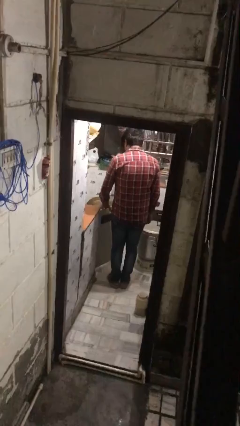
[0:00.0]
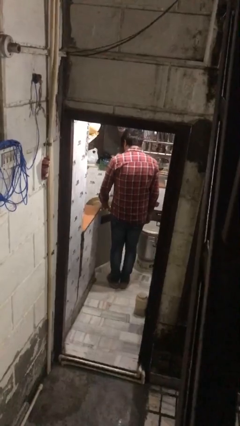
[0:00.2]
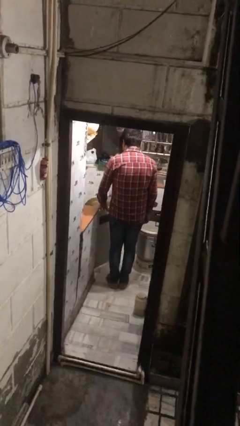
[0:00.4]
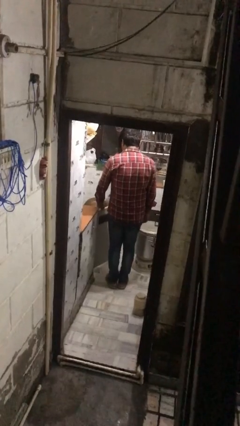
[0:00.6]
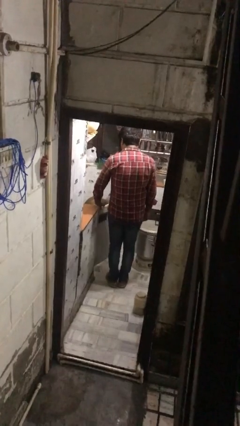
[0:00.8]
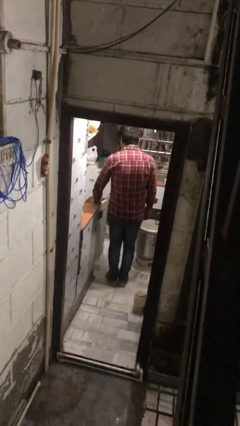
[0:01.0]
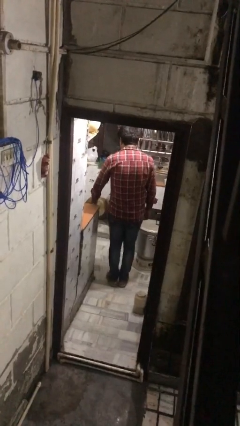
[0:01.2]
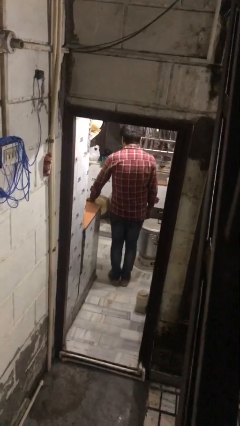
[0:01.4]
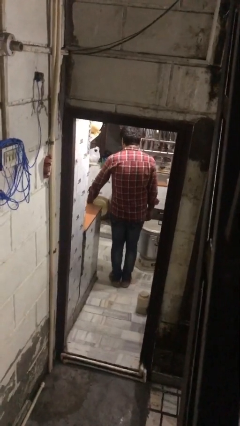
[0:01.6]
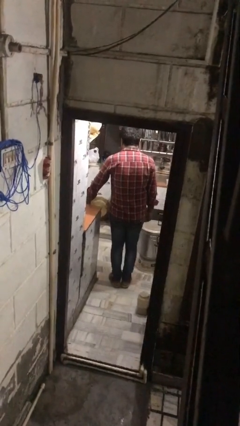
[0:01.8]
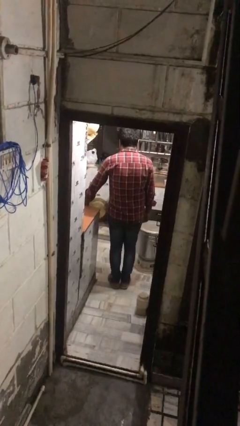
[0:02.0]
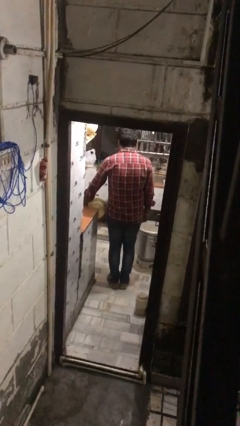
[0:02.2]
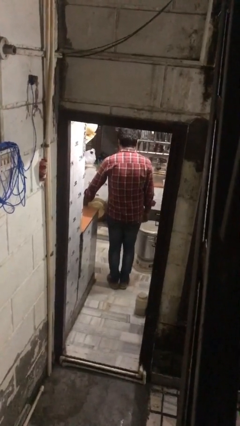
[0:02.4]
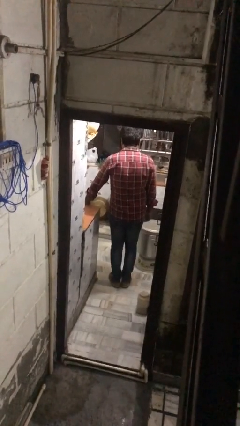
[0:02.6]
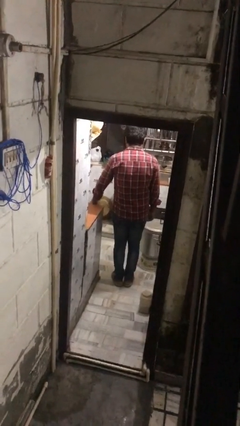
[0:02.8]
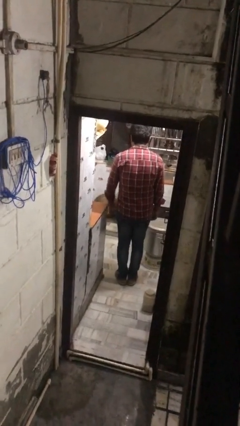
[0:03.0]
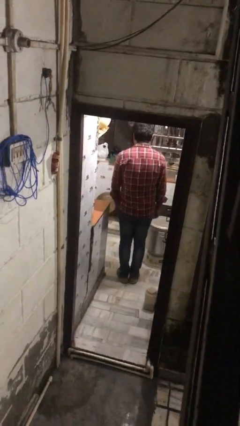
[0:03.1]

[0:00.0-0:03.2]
person closes kitchen drawer

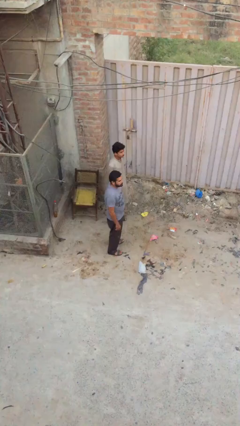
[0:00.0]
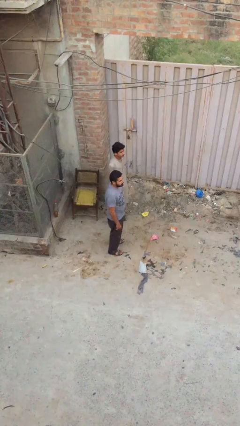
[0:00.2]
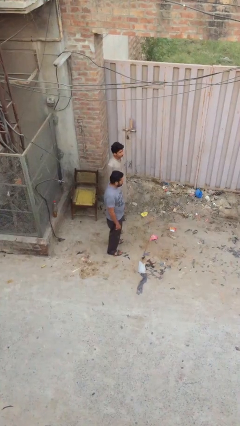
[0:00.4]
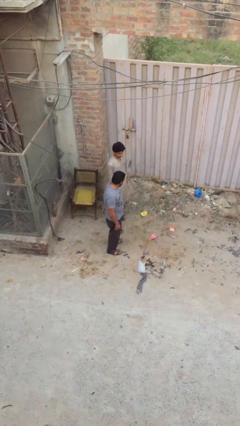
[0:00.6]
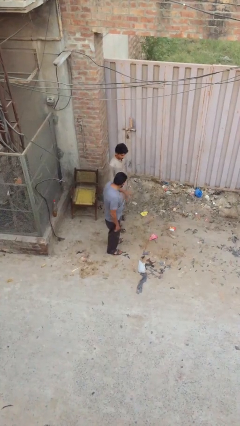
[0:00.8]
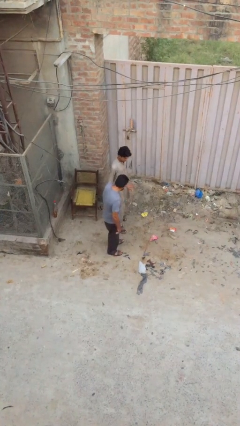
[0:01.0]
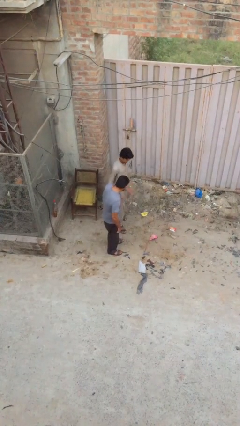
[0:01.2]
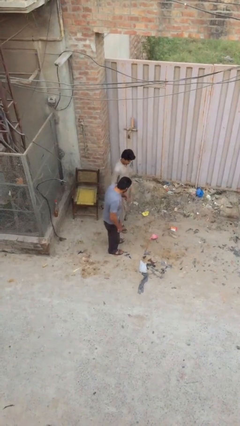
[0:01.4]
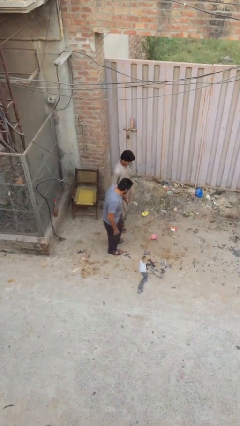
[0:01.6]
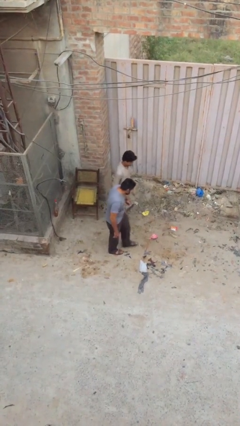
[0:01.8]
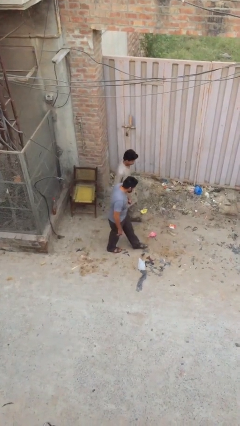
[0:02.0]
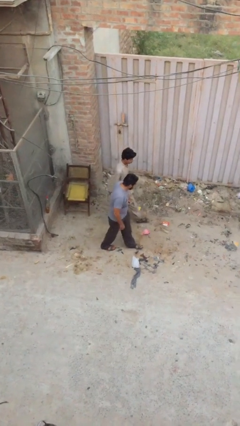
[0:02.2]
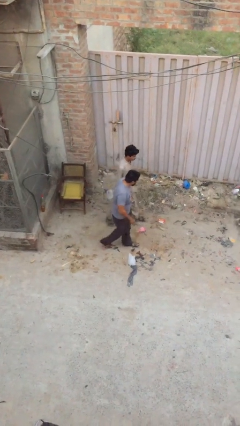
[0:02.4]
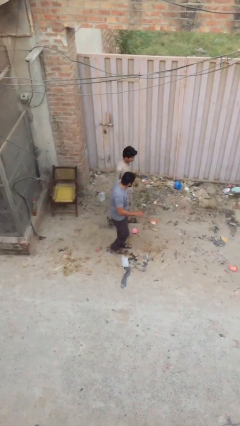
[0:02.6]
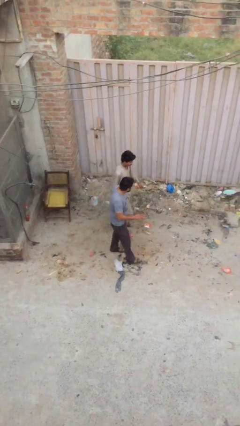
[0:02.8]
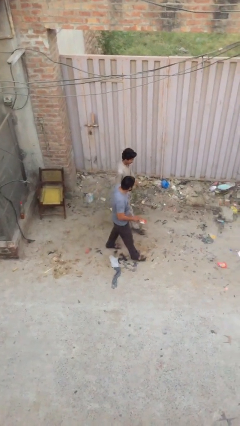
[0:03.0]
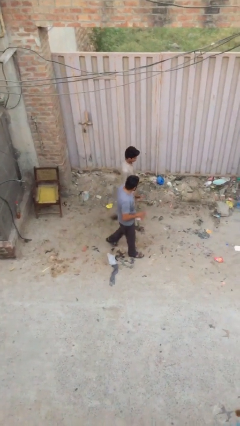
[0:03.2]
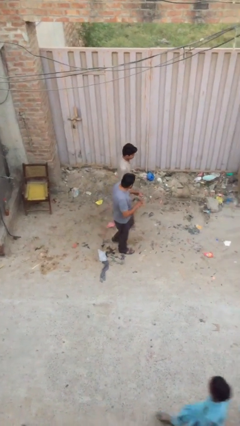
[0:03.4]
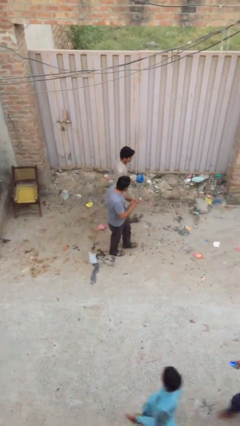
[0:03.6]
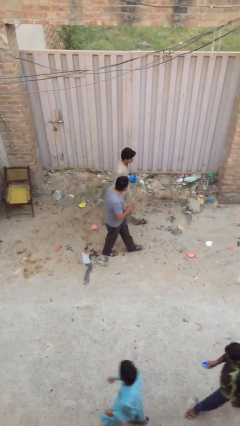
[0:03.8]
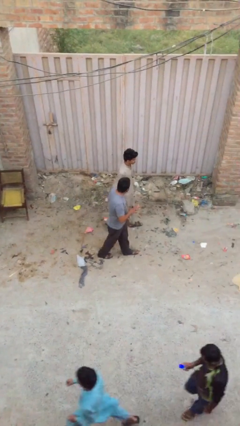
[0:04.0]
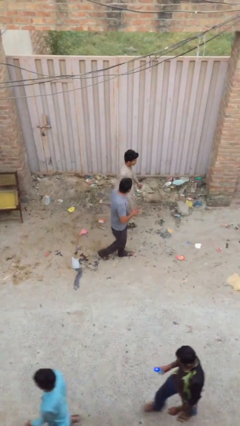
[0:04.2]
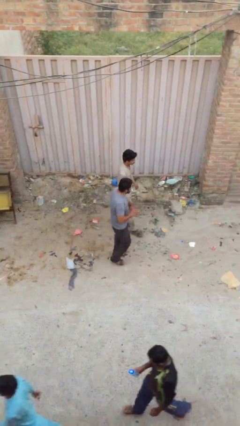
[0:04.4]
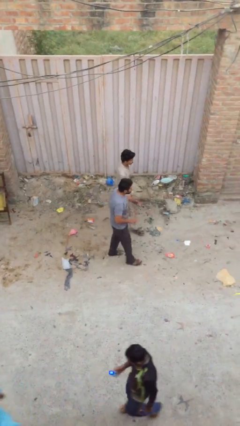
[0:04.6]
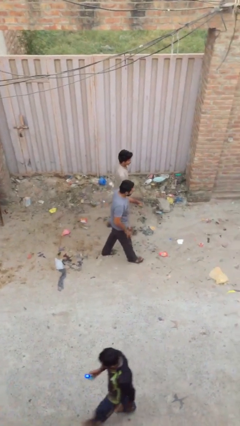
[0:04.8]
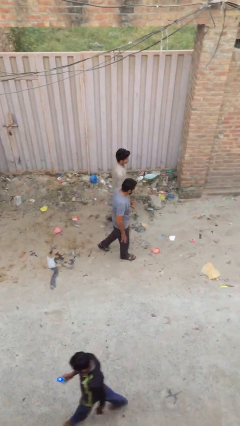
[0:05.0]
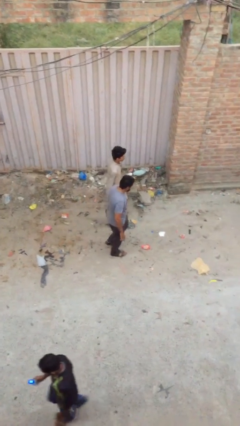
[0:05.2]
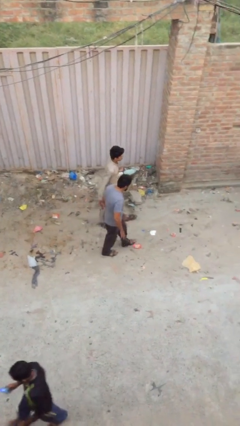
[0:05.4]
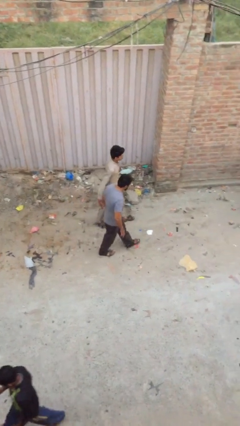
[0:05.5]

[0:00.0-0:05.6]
person holds hand

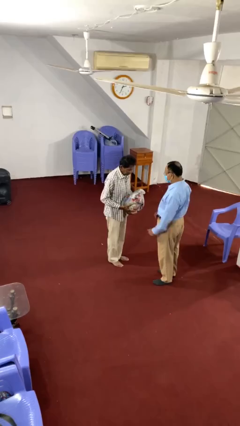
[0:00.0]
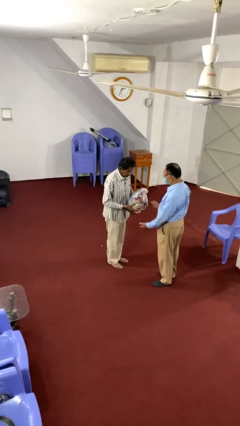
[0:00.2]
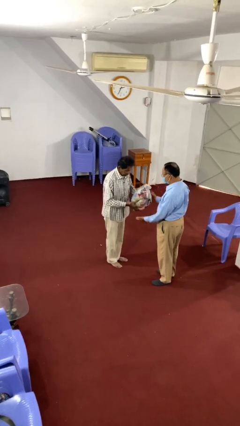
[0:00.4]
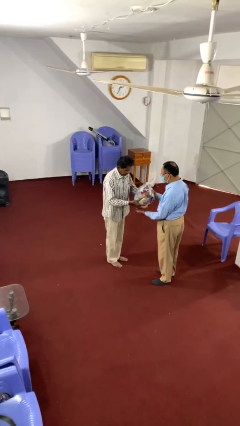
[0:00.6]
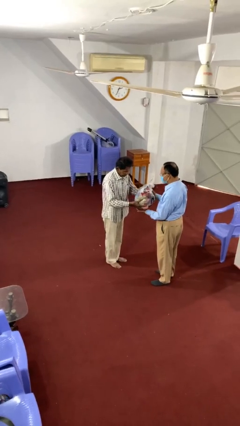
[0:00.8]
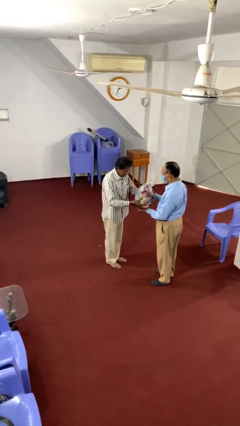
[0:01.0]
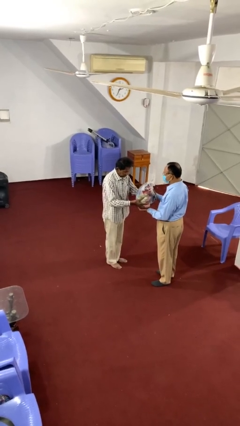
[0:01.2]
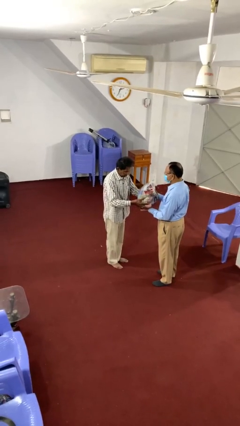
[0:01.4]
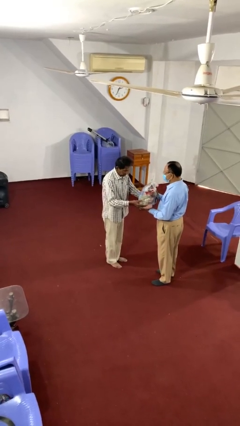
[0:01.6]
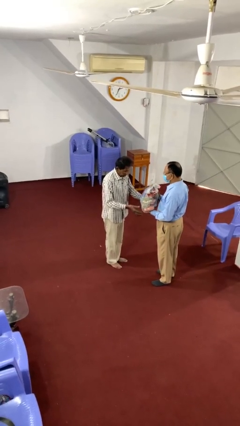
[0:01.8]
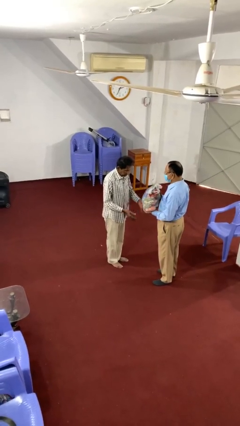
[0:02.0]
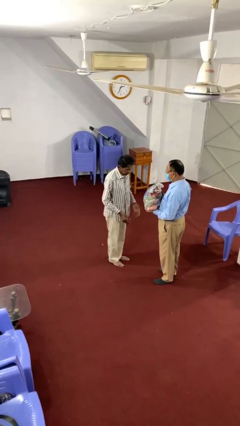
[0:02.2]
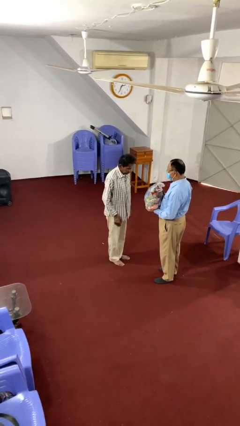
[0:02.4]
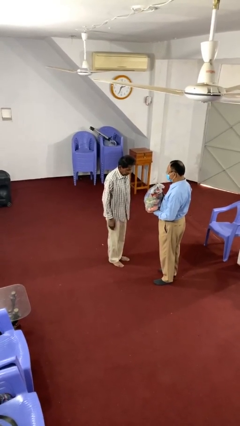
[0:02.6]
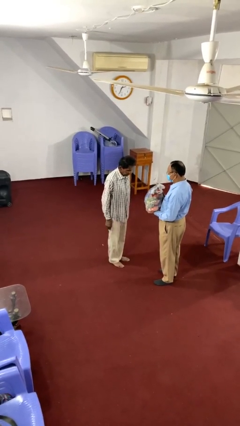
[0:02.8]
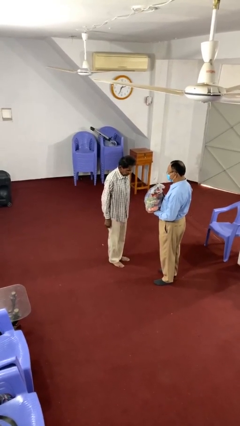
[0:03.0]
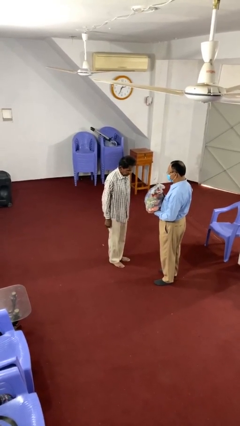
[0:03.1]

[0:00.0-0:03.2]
person transfers object to person

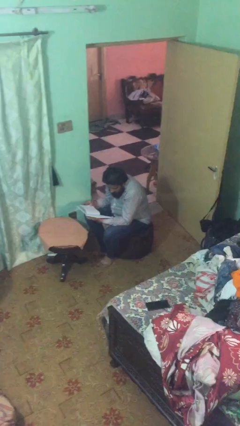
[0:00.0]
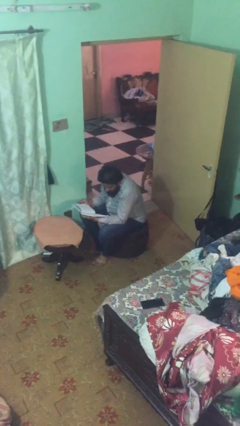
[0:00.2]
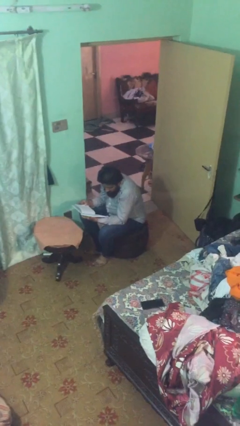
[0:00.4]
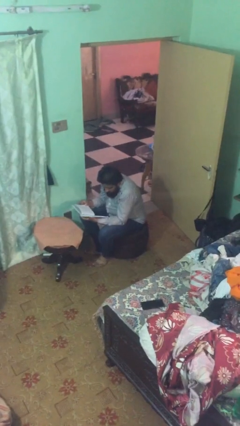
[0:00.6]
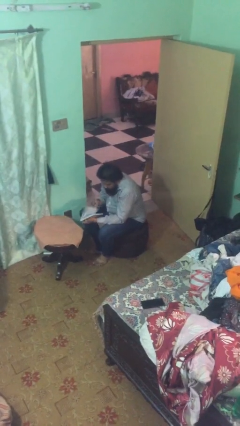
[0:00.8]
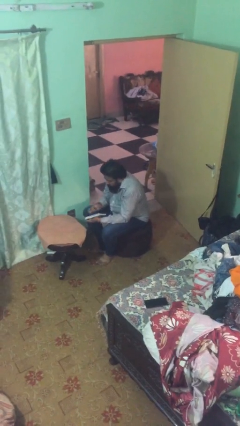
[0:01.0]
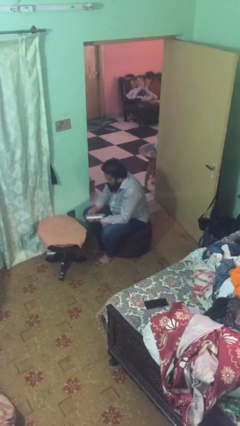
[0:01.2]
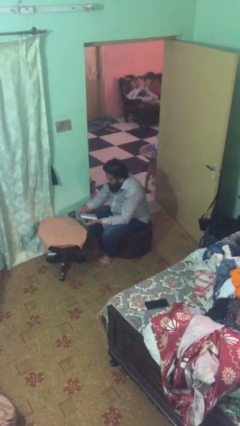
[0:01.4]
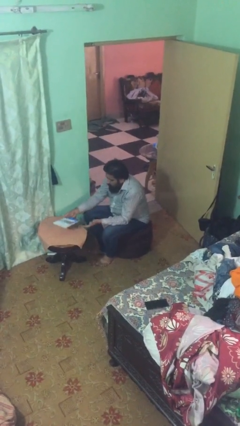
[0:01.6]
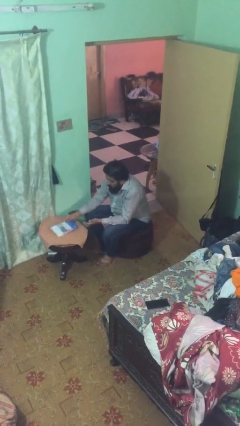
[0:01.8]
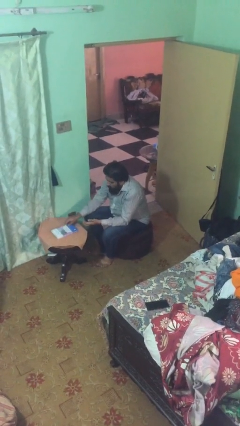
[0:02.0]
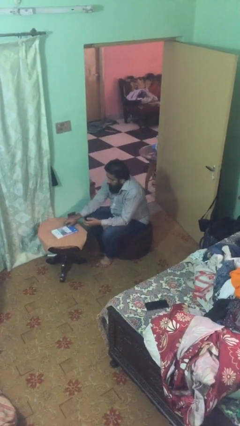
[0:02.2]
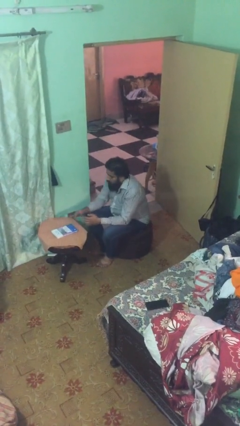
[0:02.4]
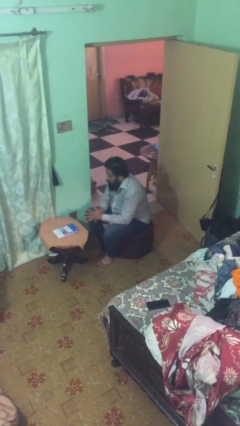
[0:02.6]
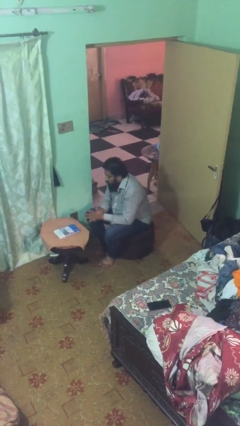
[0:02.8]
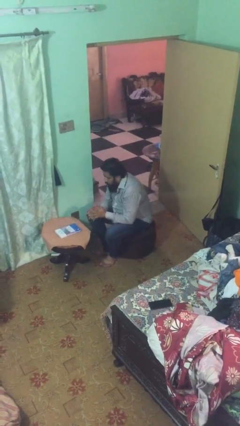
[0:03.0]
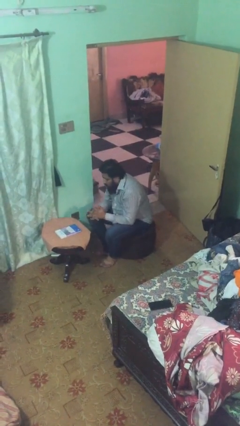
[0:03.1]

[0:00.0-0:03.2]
person puts down object on table

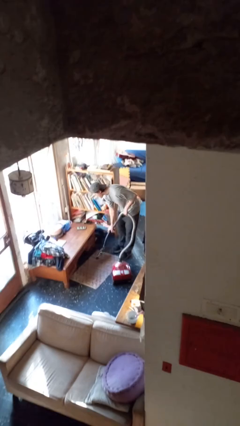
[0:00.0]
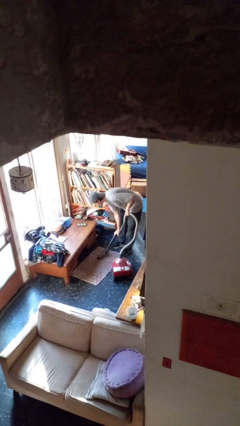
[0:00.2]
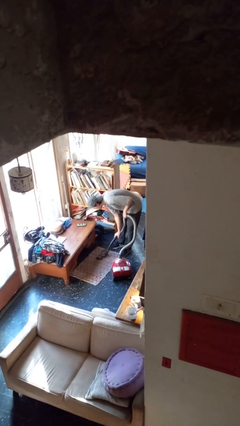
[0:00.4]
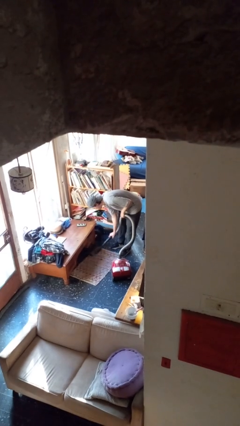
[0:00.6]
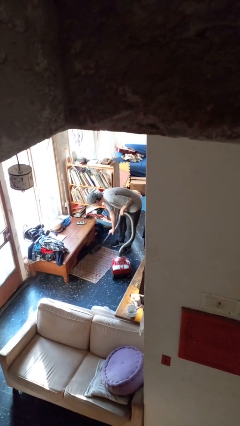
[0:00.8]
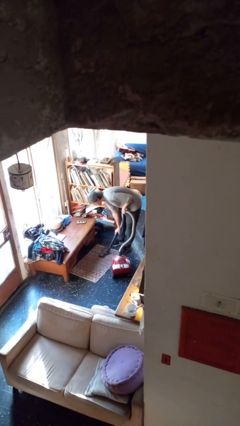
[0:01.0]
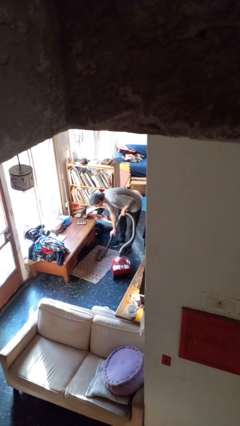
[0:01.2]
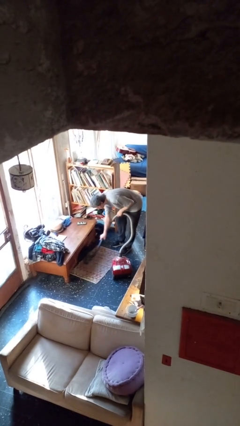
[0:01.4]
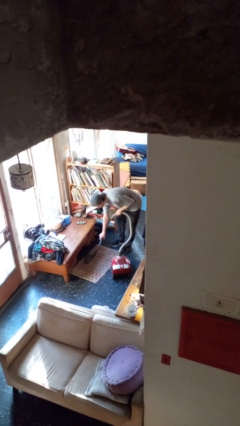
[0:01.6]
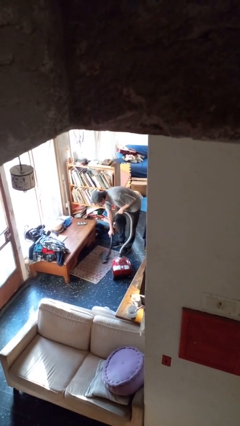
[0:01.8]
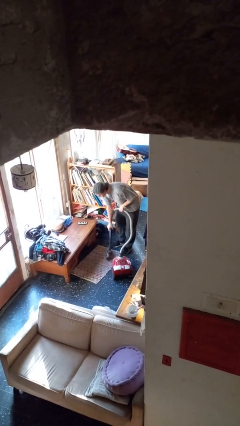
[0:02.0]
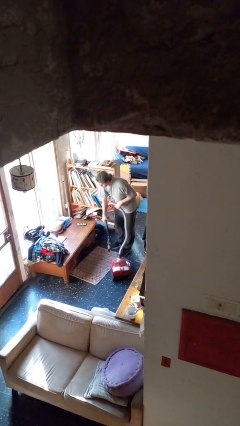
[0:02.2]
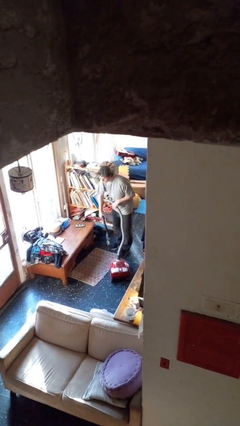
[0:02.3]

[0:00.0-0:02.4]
person vacuums carpet
